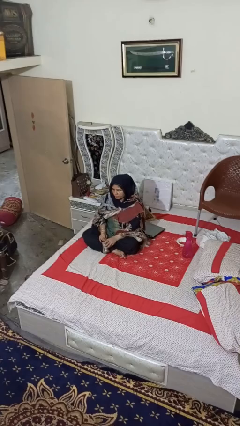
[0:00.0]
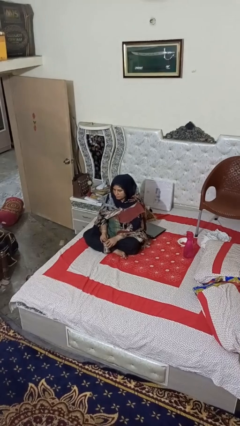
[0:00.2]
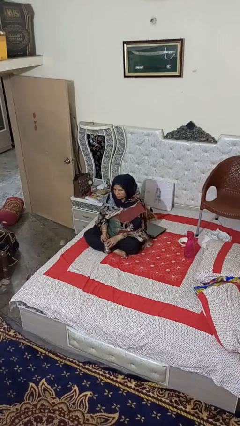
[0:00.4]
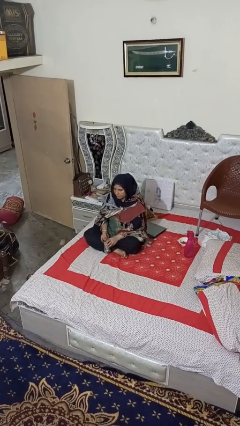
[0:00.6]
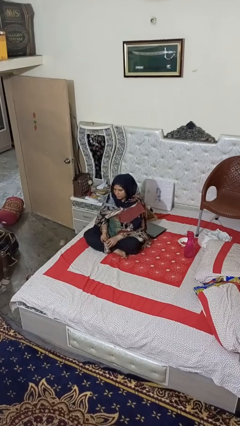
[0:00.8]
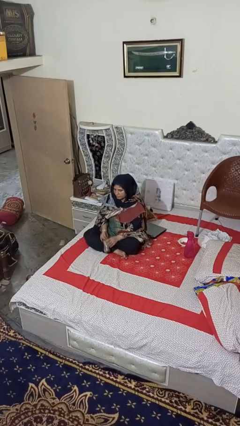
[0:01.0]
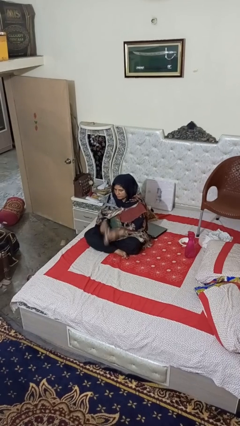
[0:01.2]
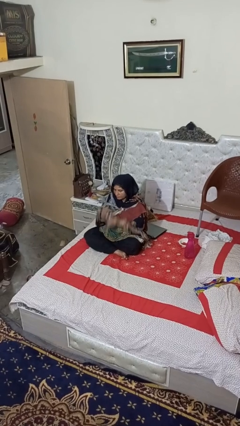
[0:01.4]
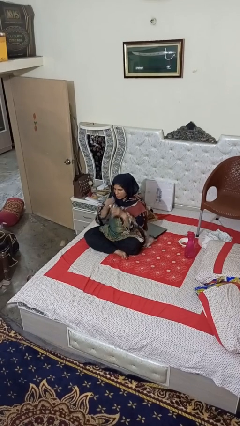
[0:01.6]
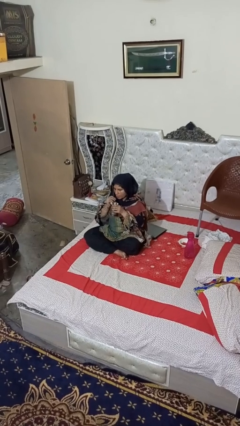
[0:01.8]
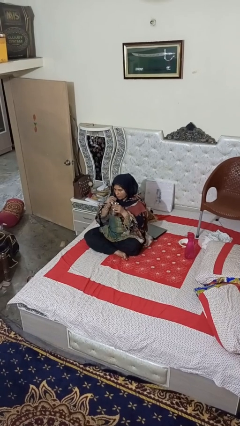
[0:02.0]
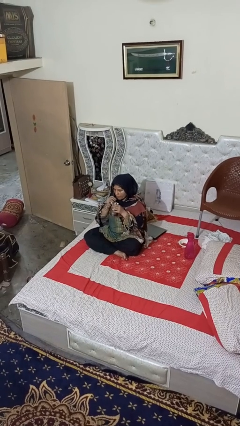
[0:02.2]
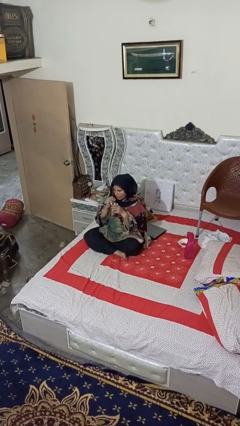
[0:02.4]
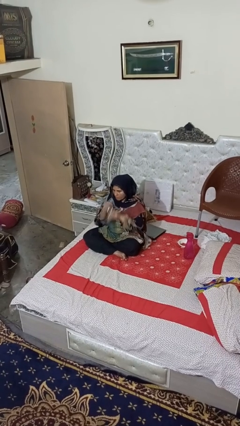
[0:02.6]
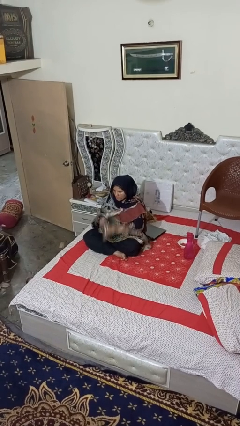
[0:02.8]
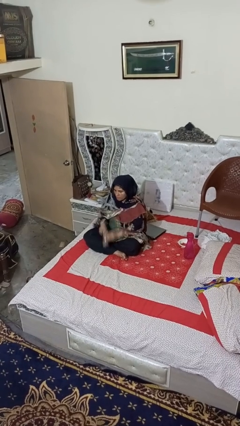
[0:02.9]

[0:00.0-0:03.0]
person drinks from straw

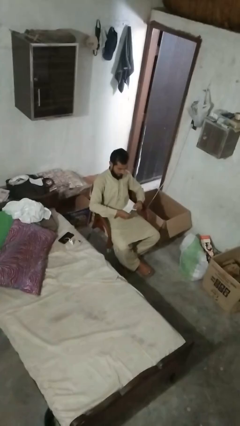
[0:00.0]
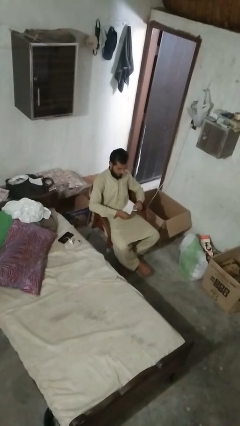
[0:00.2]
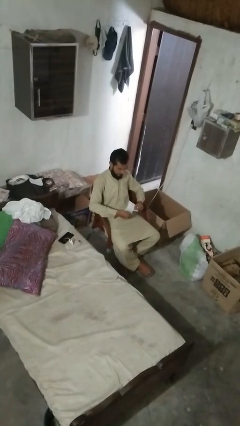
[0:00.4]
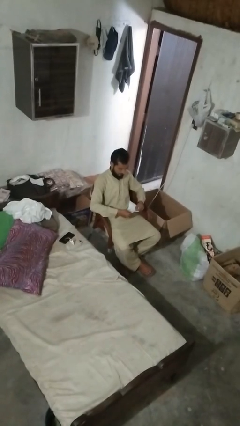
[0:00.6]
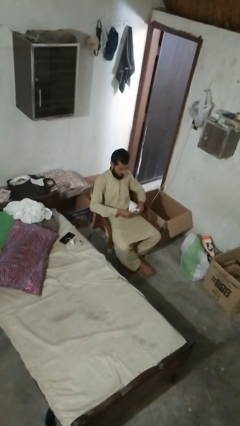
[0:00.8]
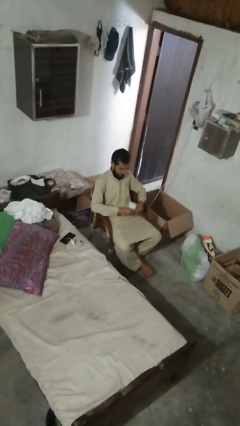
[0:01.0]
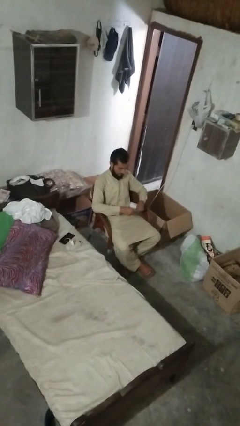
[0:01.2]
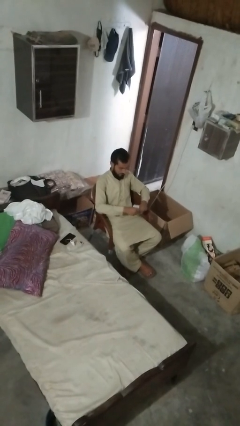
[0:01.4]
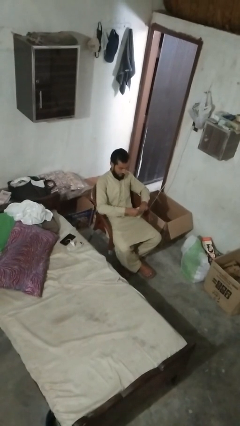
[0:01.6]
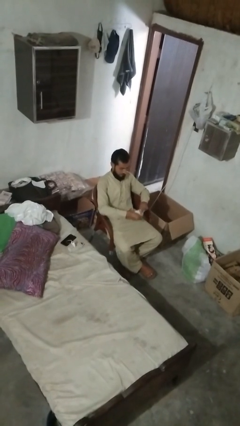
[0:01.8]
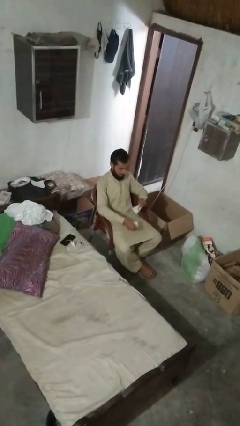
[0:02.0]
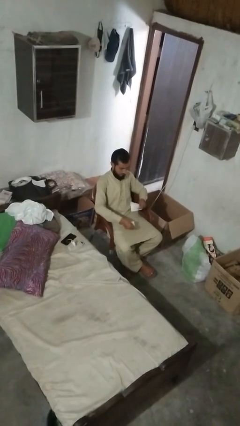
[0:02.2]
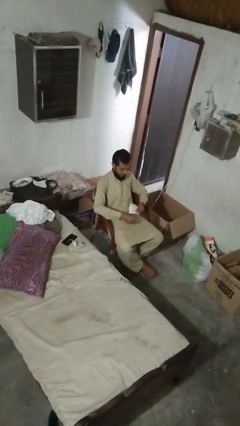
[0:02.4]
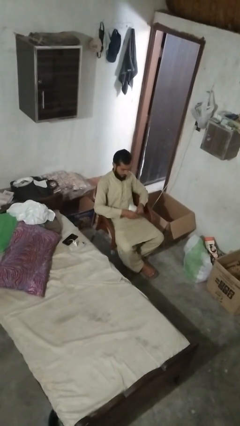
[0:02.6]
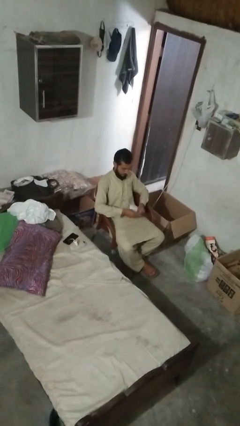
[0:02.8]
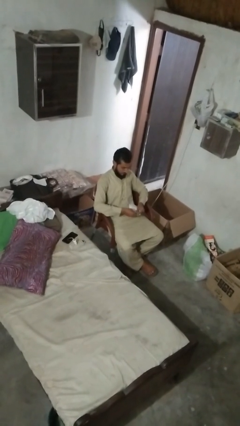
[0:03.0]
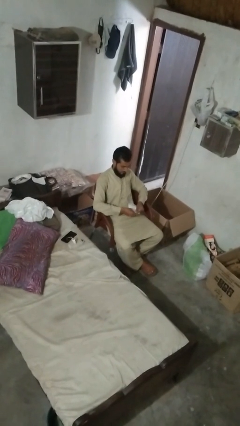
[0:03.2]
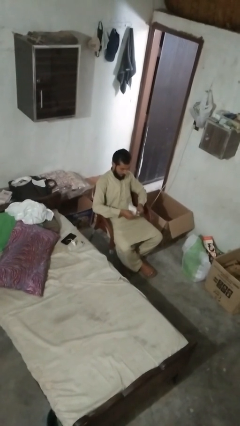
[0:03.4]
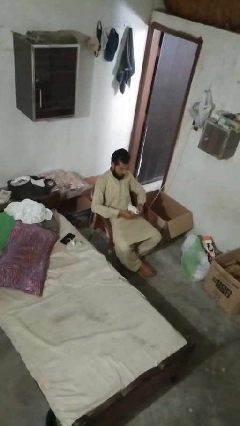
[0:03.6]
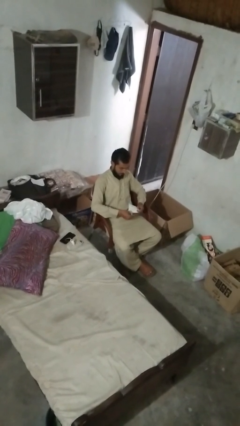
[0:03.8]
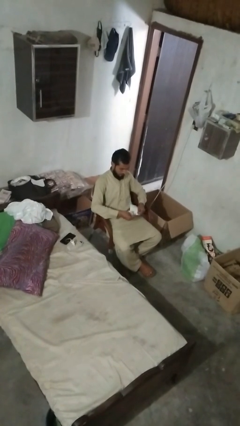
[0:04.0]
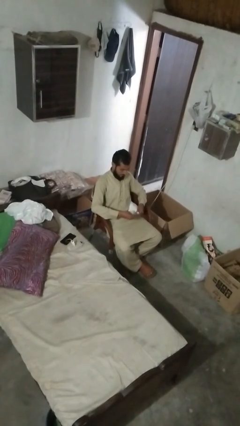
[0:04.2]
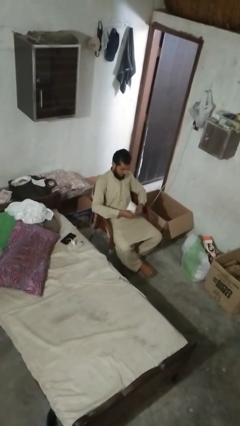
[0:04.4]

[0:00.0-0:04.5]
person tears paper

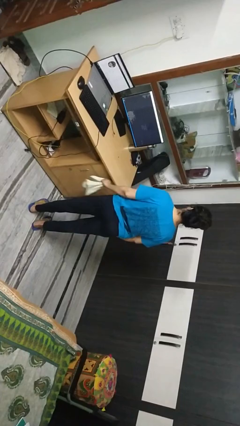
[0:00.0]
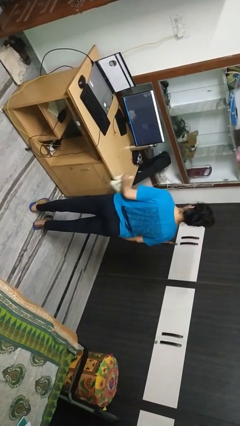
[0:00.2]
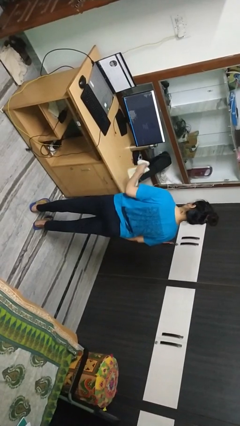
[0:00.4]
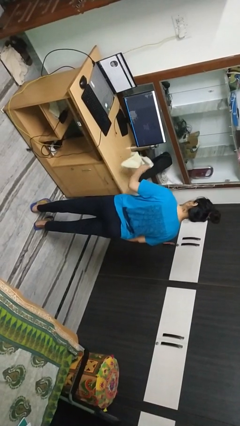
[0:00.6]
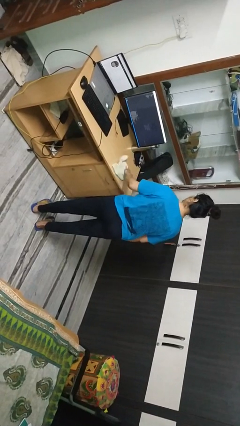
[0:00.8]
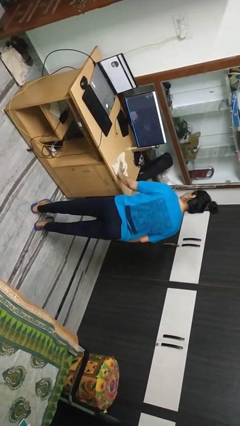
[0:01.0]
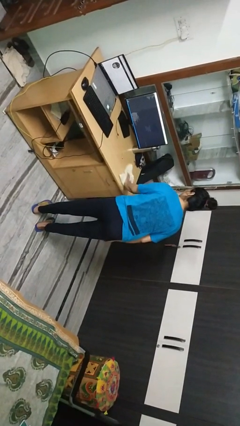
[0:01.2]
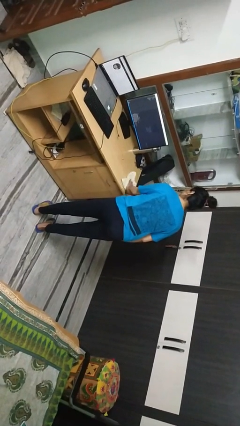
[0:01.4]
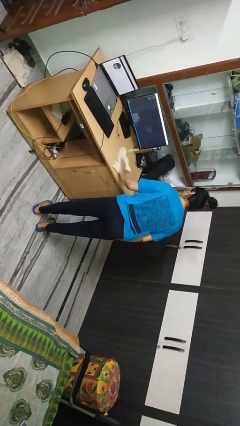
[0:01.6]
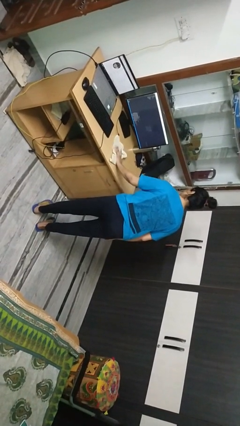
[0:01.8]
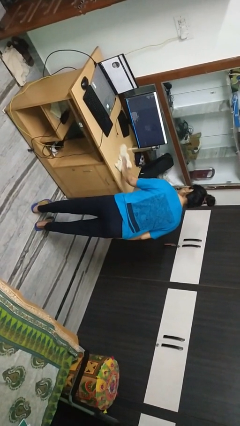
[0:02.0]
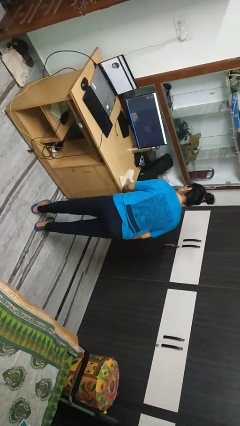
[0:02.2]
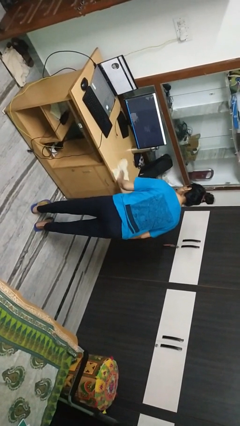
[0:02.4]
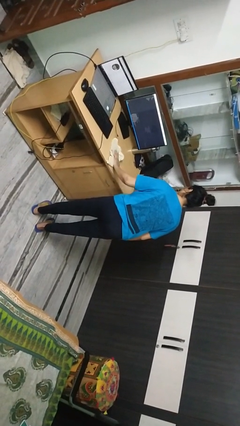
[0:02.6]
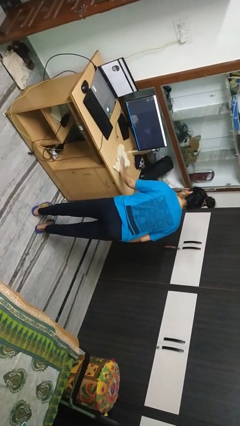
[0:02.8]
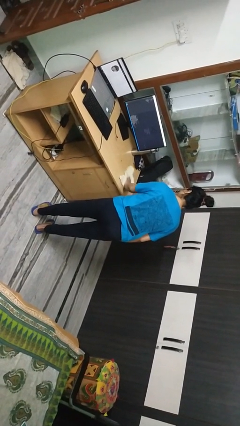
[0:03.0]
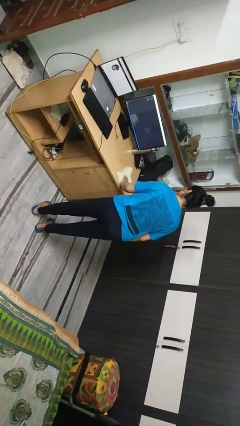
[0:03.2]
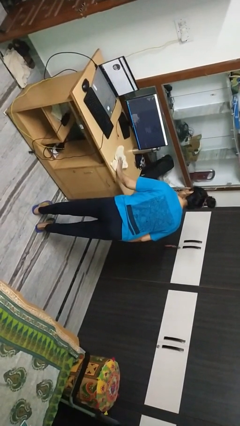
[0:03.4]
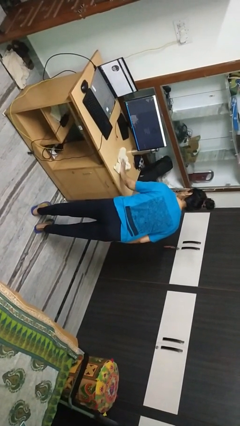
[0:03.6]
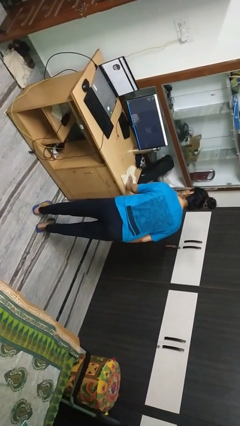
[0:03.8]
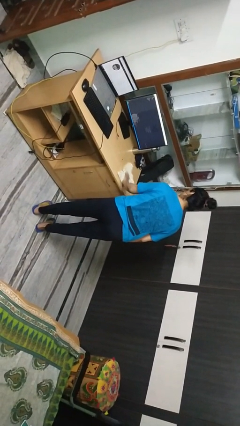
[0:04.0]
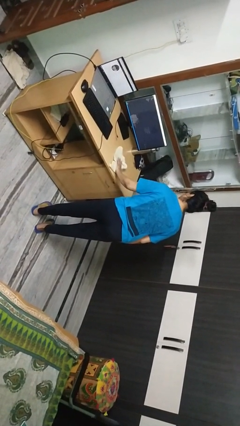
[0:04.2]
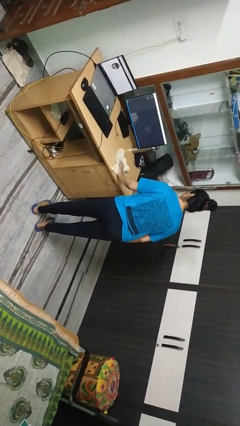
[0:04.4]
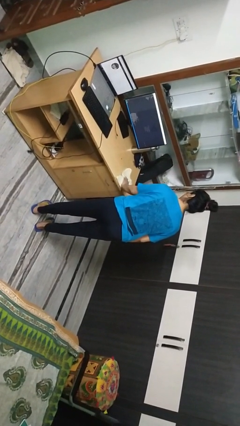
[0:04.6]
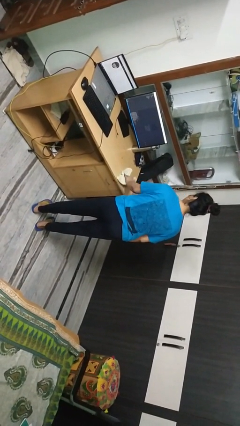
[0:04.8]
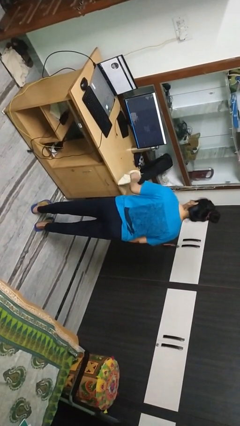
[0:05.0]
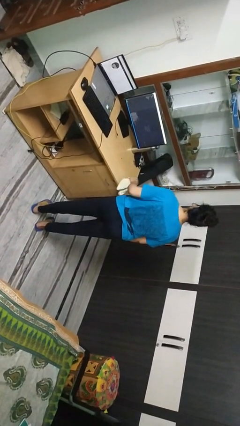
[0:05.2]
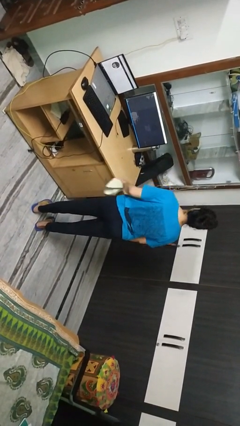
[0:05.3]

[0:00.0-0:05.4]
person cleans table with rag

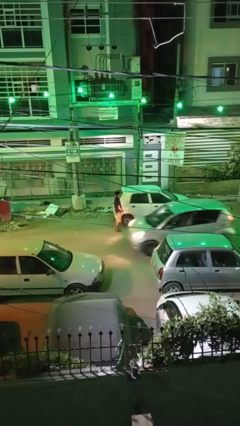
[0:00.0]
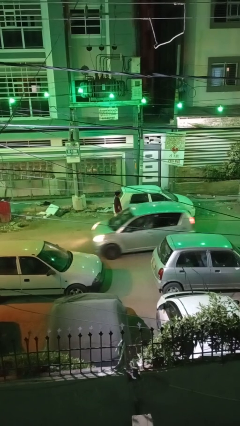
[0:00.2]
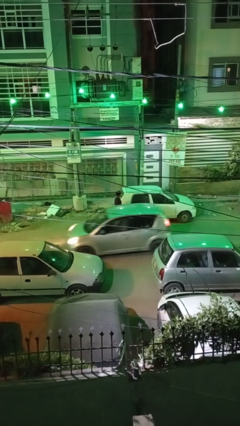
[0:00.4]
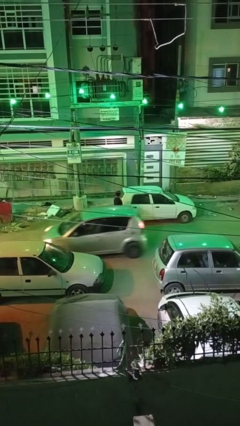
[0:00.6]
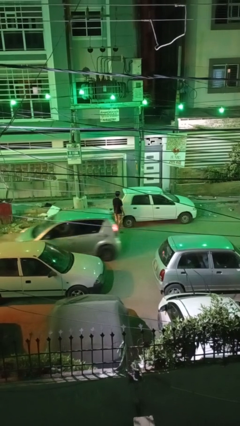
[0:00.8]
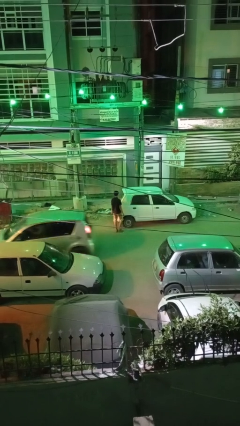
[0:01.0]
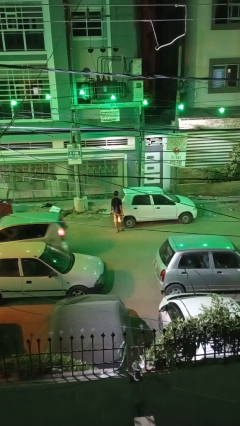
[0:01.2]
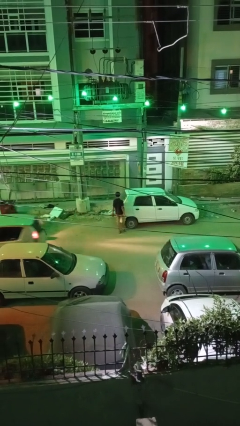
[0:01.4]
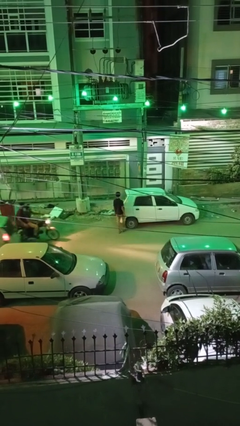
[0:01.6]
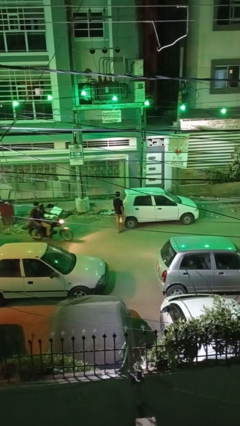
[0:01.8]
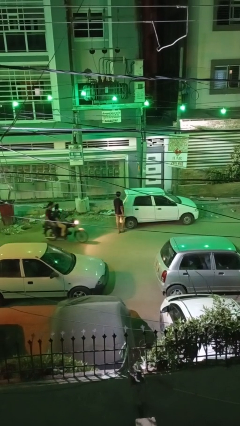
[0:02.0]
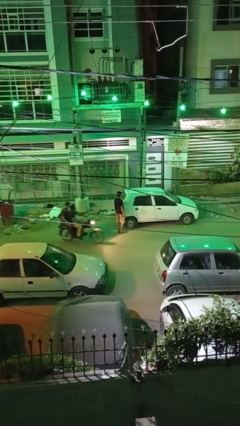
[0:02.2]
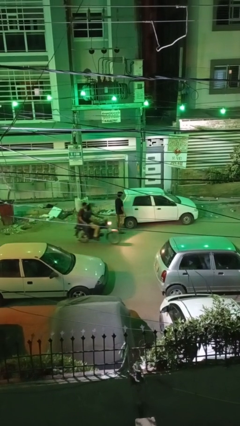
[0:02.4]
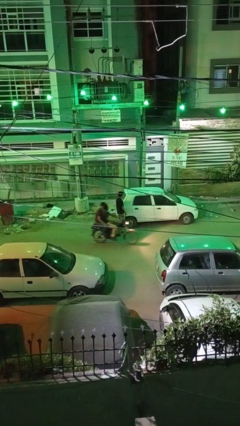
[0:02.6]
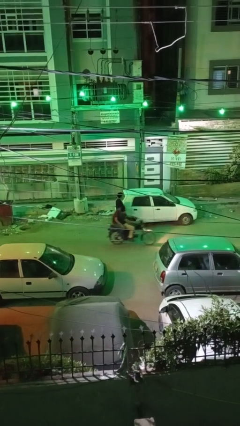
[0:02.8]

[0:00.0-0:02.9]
person kicks car tires

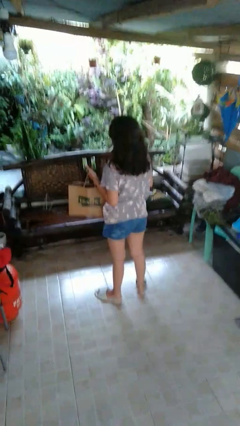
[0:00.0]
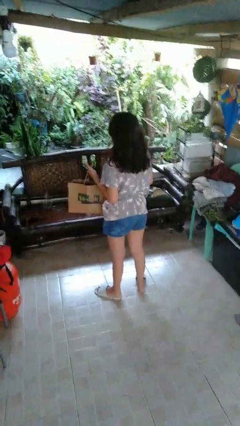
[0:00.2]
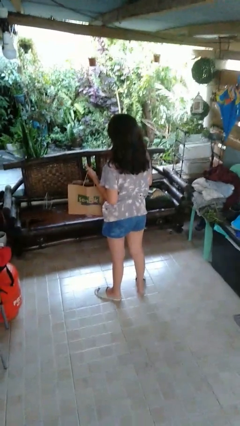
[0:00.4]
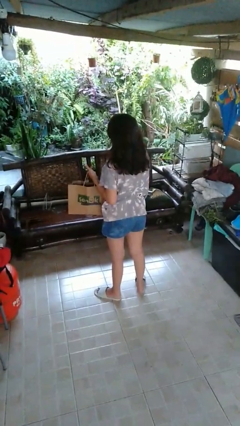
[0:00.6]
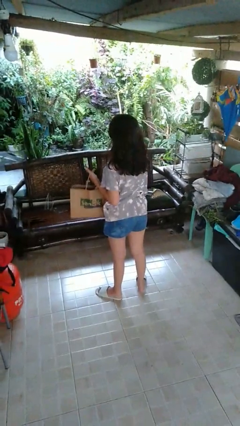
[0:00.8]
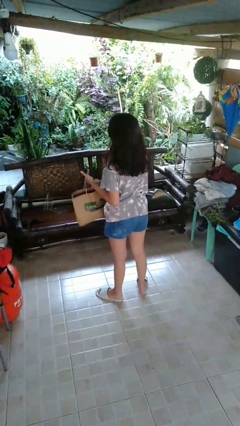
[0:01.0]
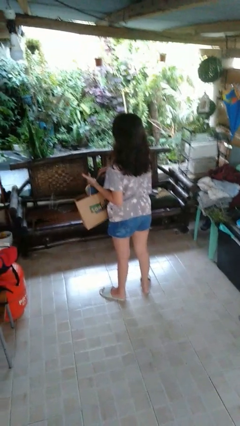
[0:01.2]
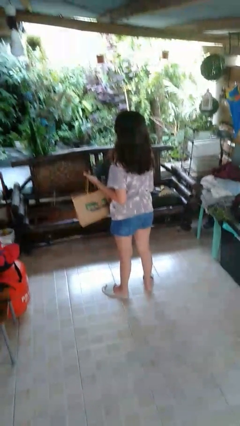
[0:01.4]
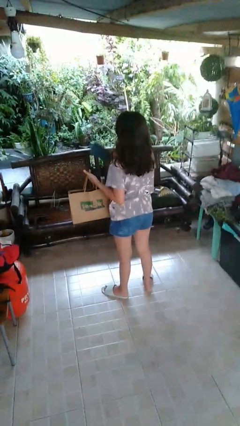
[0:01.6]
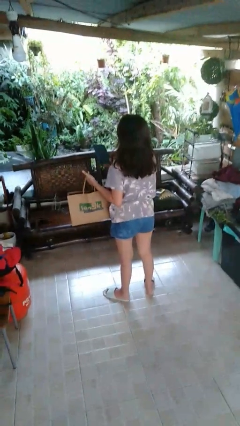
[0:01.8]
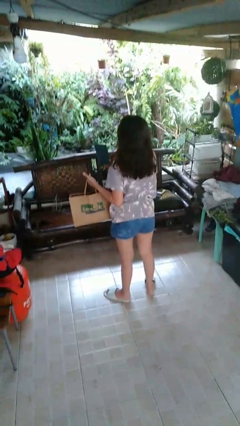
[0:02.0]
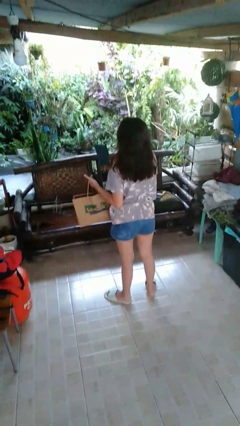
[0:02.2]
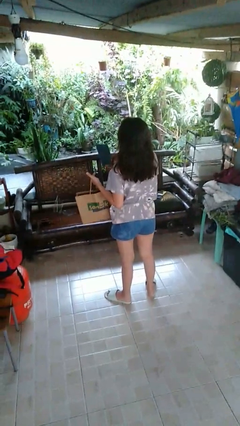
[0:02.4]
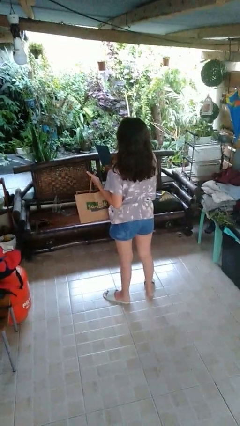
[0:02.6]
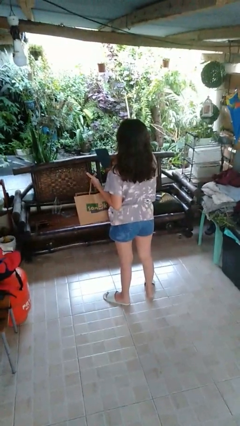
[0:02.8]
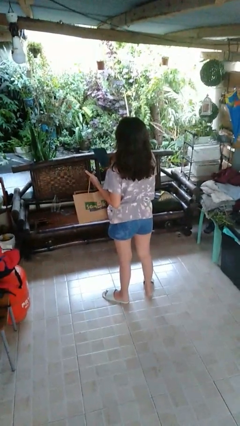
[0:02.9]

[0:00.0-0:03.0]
person takes object from bag
